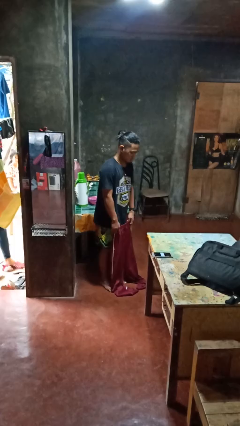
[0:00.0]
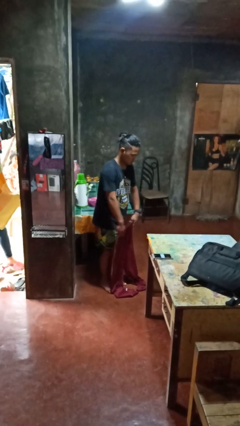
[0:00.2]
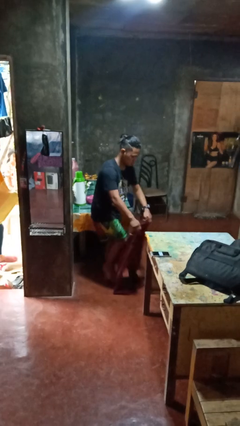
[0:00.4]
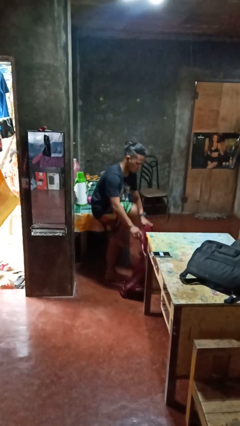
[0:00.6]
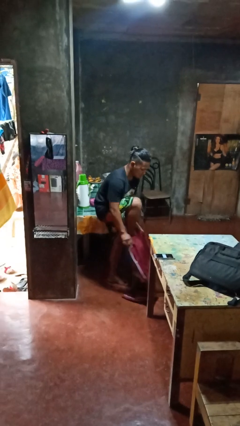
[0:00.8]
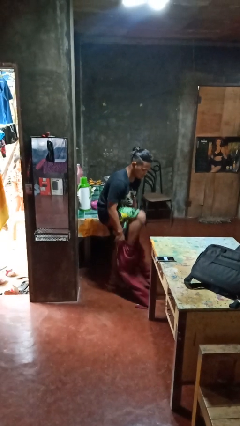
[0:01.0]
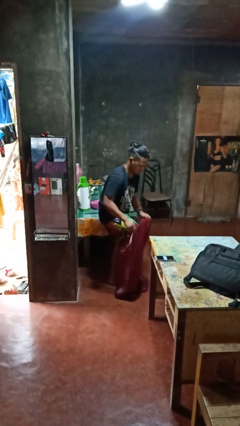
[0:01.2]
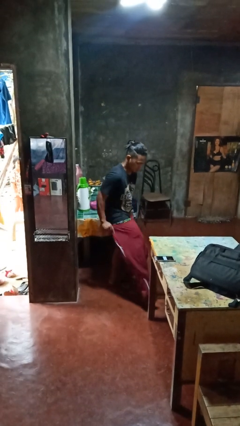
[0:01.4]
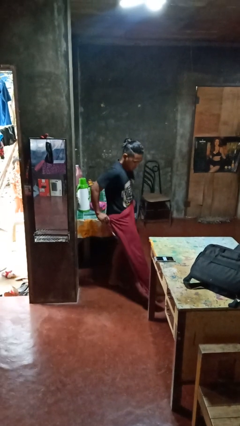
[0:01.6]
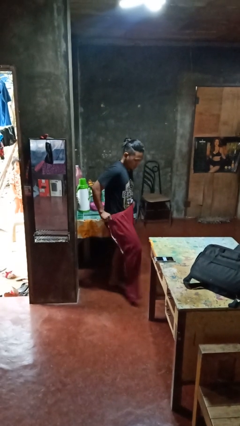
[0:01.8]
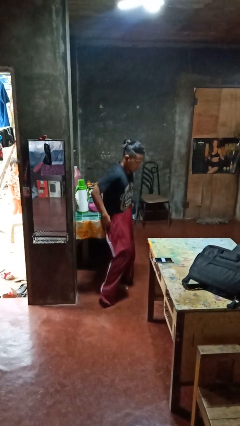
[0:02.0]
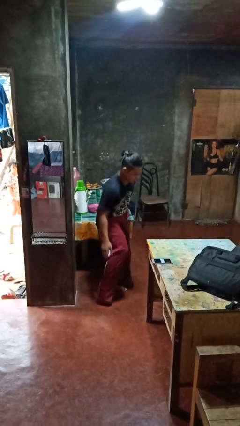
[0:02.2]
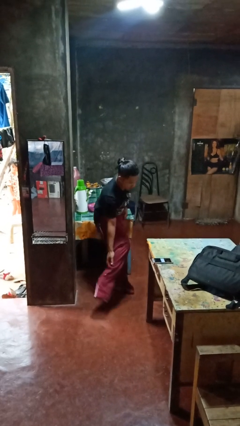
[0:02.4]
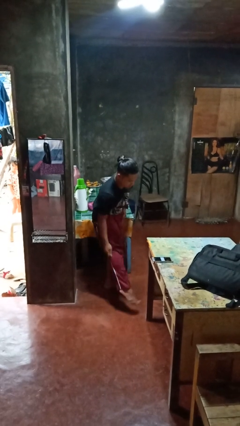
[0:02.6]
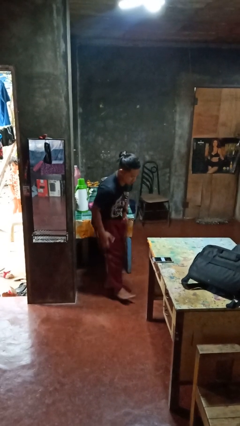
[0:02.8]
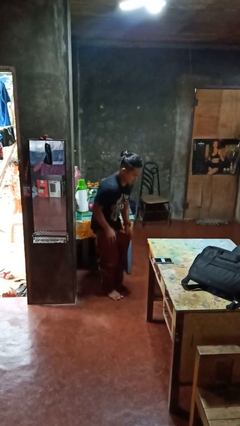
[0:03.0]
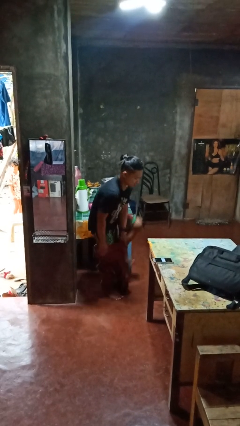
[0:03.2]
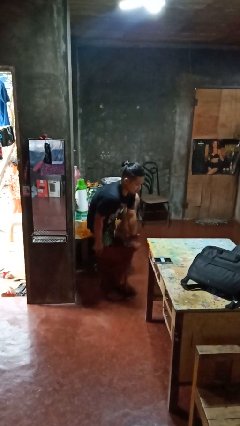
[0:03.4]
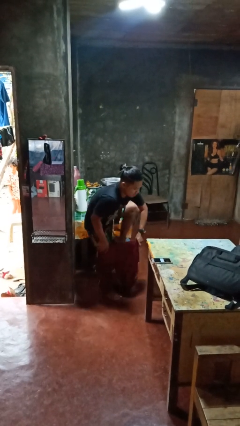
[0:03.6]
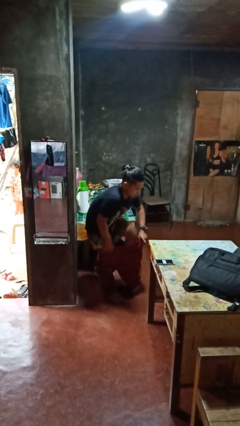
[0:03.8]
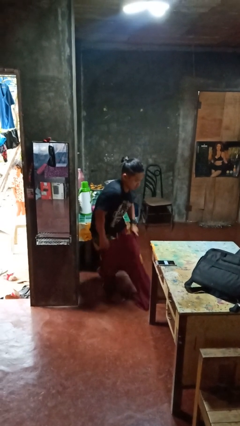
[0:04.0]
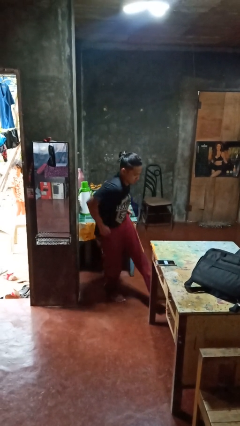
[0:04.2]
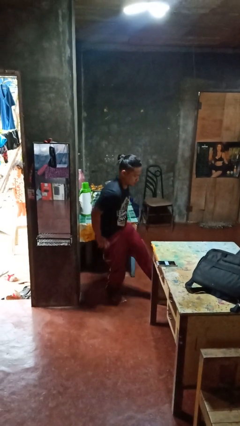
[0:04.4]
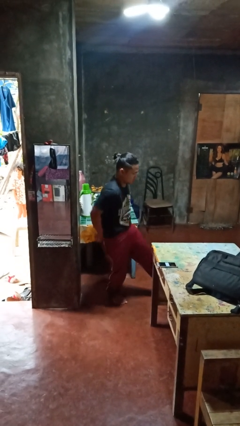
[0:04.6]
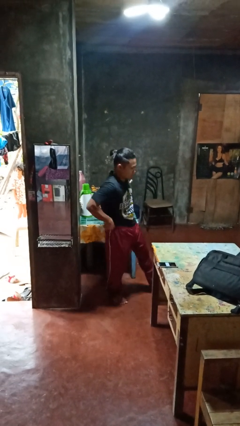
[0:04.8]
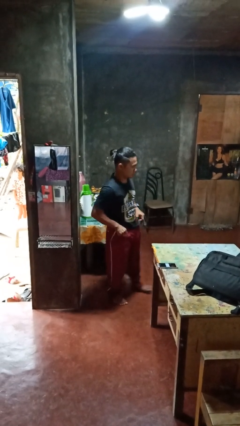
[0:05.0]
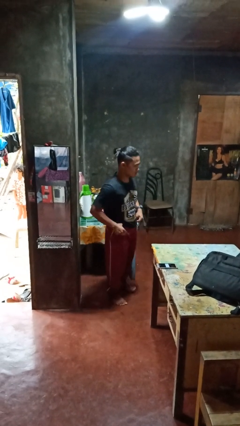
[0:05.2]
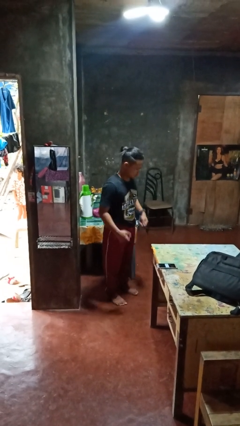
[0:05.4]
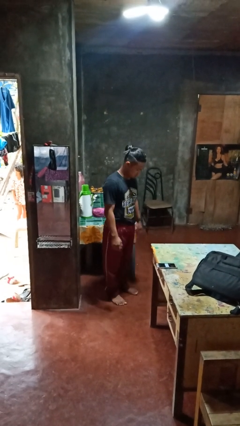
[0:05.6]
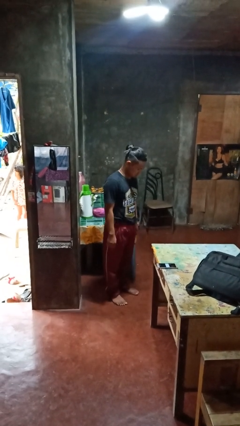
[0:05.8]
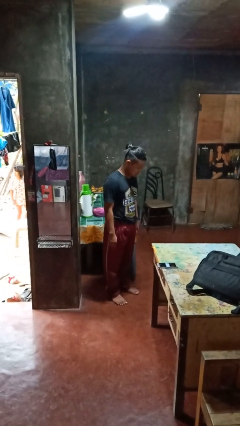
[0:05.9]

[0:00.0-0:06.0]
person puts on pants

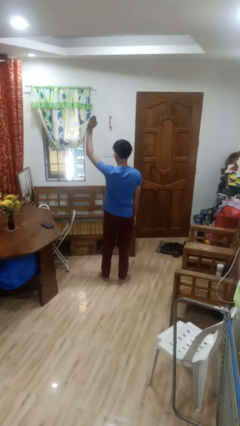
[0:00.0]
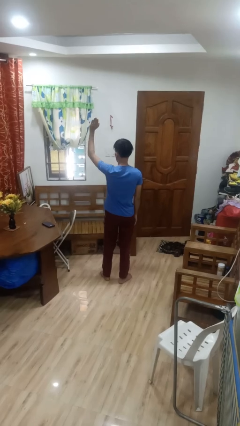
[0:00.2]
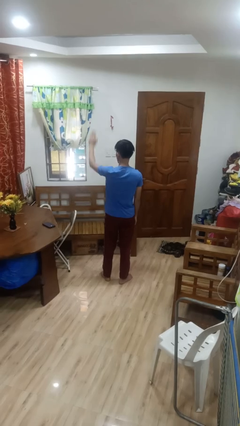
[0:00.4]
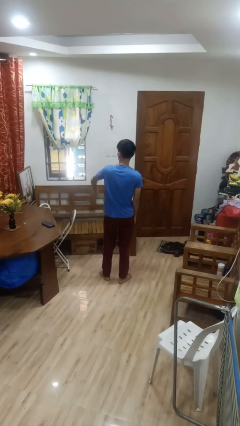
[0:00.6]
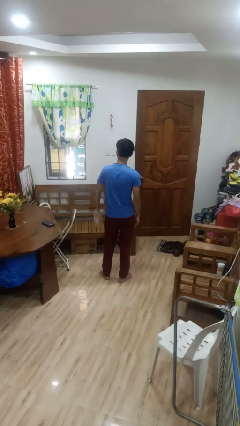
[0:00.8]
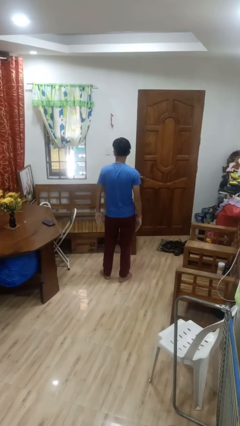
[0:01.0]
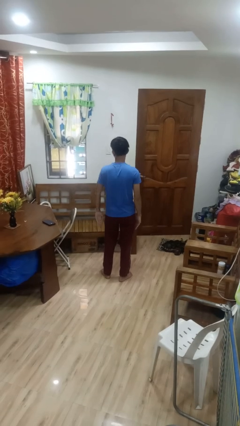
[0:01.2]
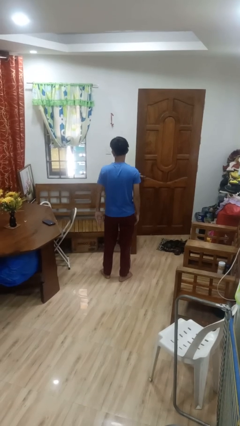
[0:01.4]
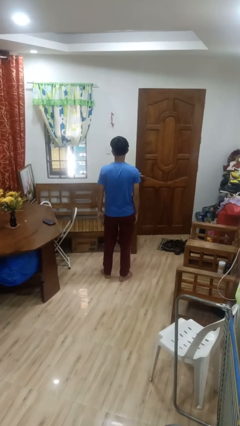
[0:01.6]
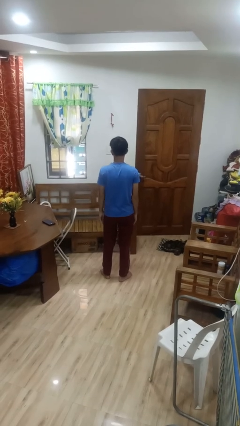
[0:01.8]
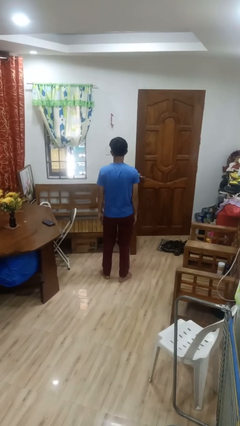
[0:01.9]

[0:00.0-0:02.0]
person gestures swipe down

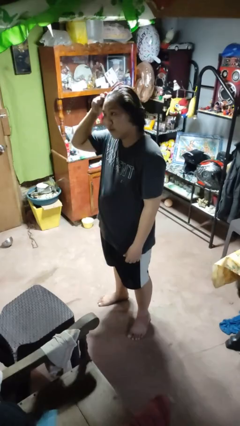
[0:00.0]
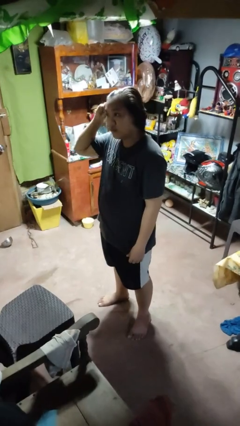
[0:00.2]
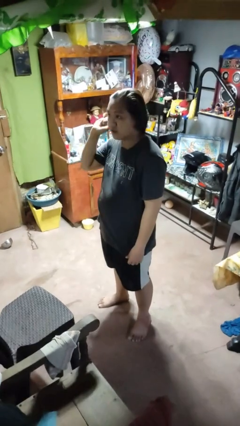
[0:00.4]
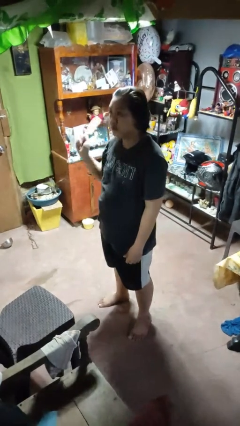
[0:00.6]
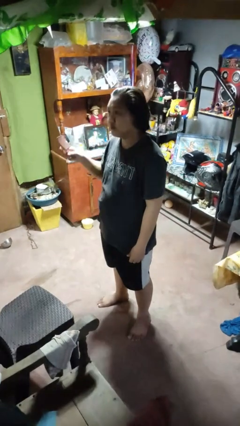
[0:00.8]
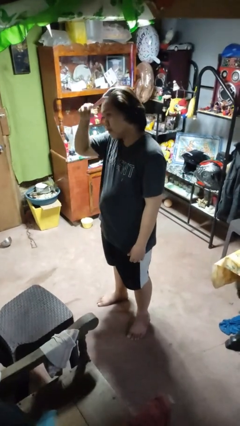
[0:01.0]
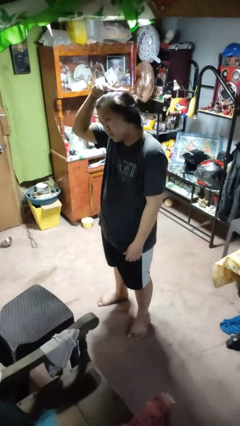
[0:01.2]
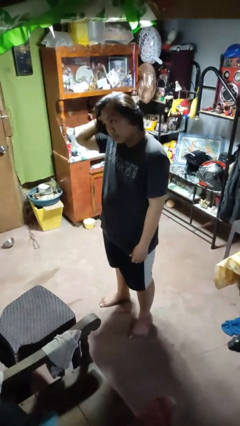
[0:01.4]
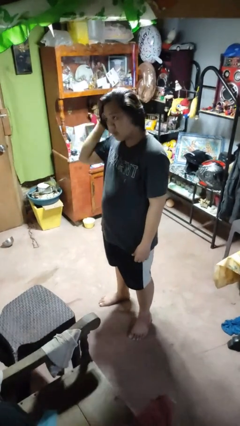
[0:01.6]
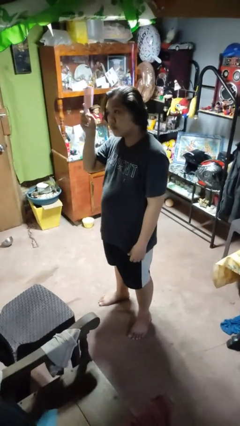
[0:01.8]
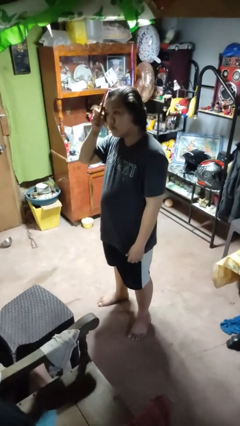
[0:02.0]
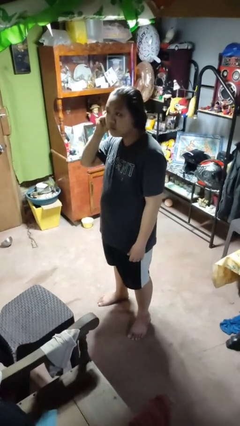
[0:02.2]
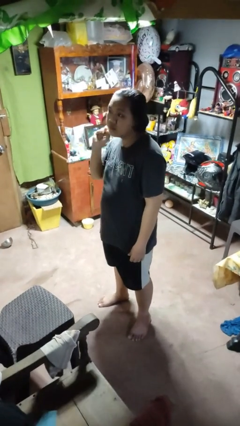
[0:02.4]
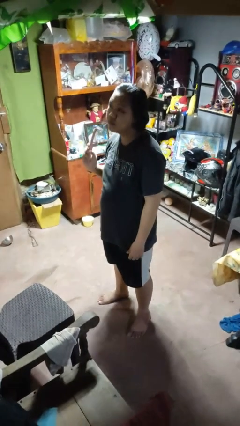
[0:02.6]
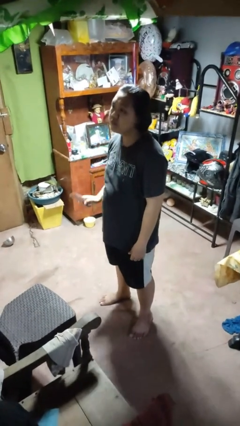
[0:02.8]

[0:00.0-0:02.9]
person brushes hair

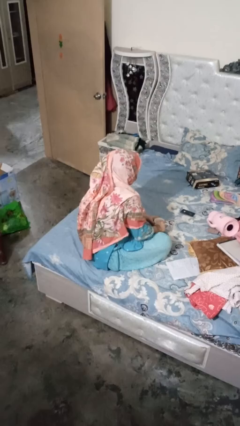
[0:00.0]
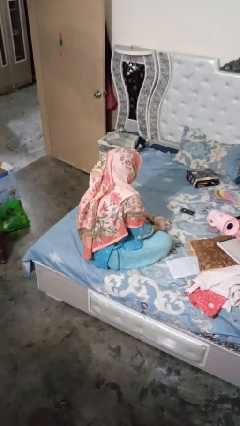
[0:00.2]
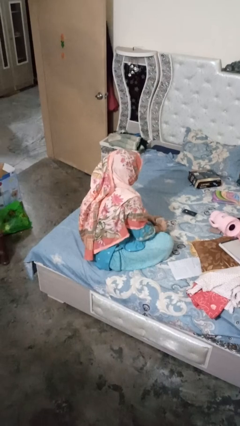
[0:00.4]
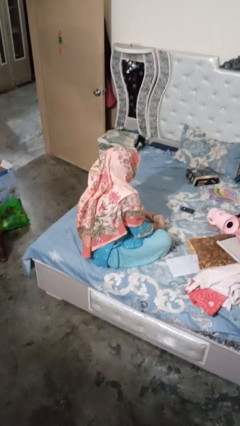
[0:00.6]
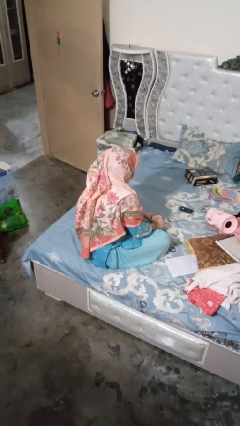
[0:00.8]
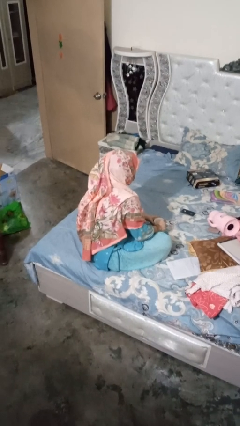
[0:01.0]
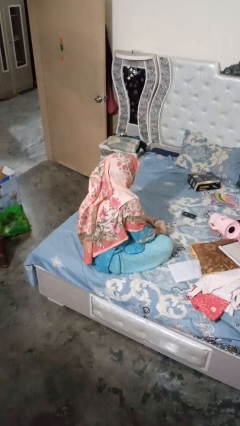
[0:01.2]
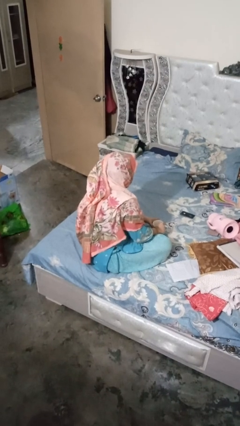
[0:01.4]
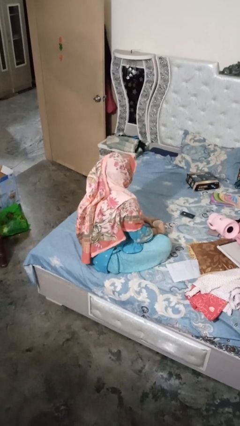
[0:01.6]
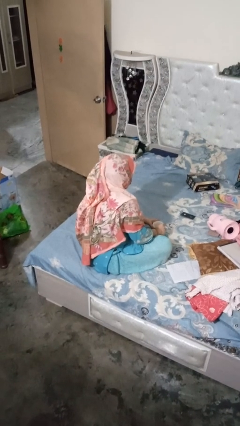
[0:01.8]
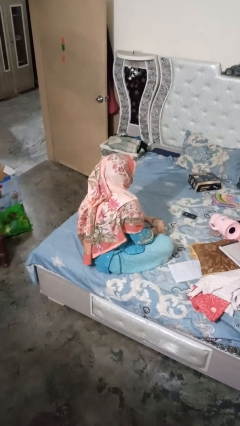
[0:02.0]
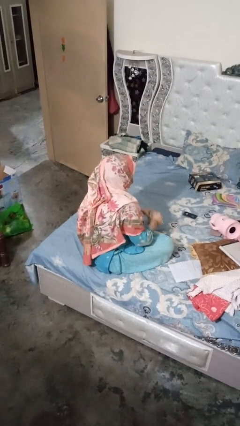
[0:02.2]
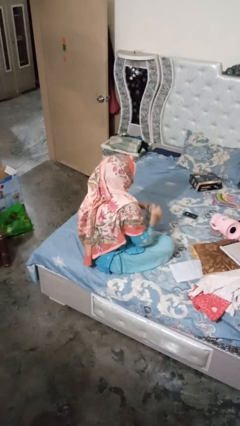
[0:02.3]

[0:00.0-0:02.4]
person stirs mug

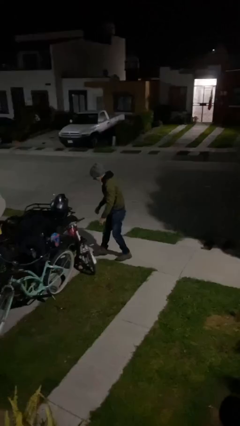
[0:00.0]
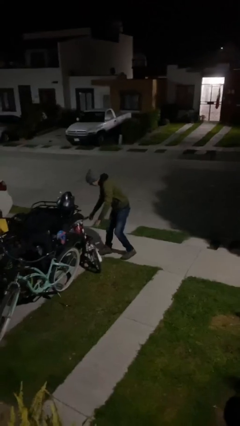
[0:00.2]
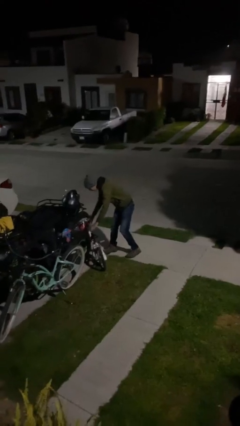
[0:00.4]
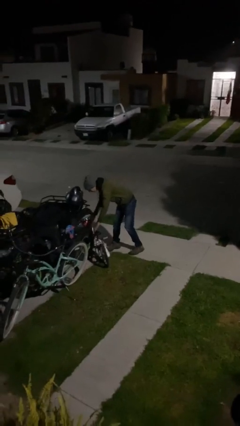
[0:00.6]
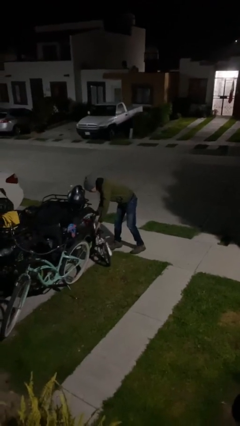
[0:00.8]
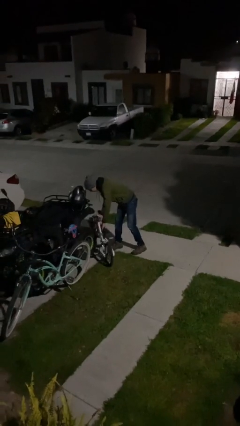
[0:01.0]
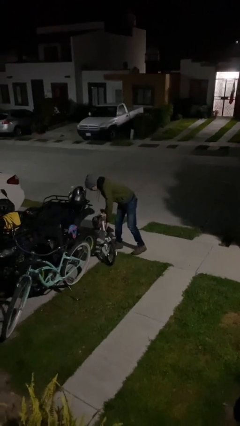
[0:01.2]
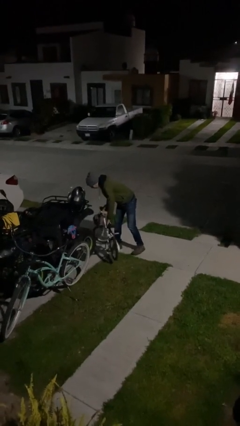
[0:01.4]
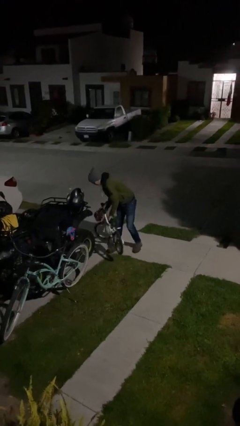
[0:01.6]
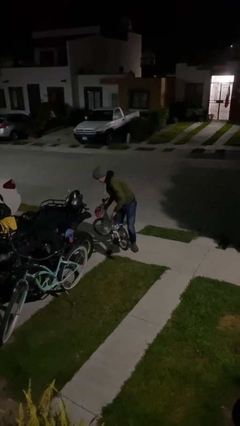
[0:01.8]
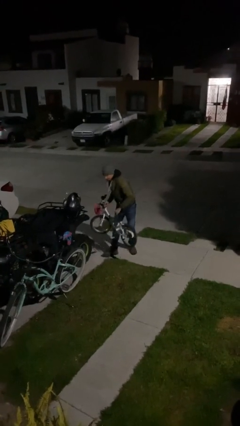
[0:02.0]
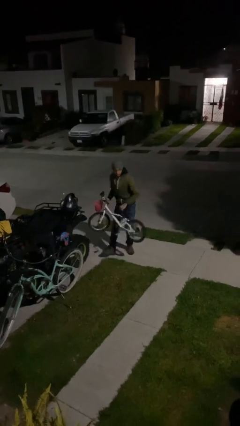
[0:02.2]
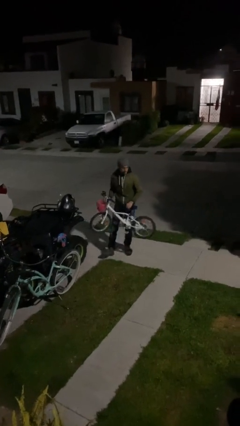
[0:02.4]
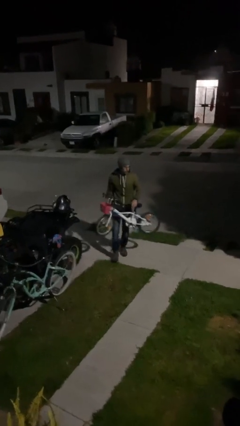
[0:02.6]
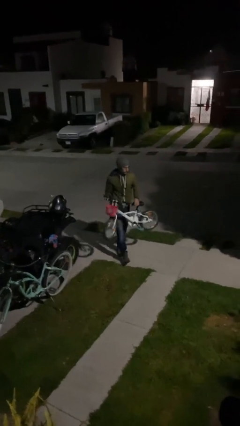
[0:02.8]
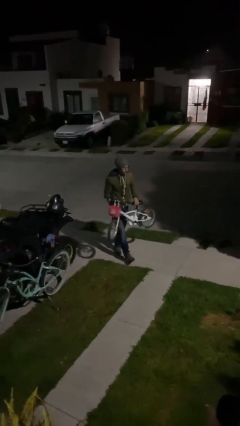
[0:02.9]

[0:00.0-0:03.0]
person picks up object from floor

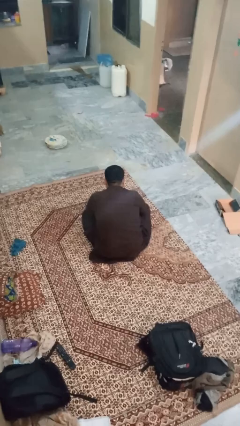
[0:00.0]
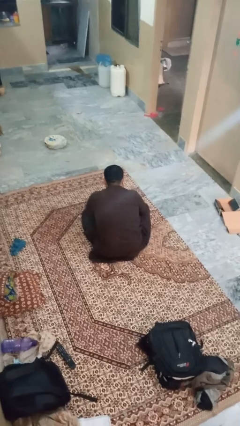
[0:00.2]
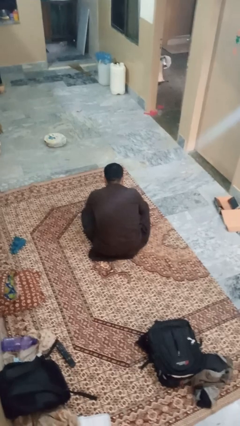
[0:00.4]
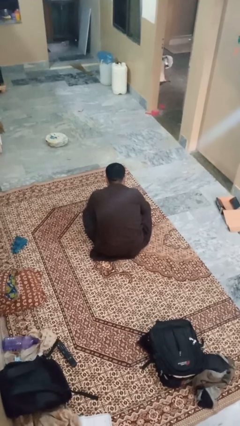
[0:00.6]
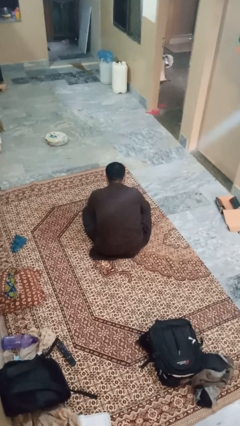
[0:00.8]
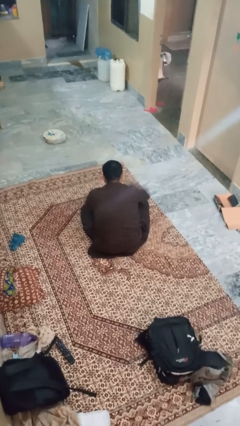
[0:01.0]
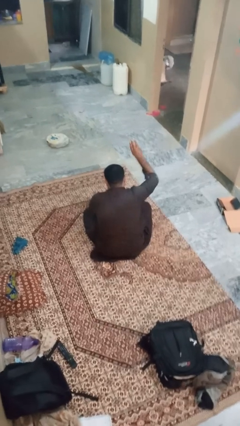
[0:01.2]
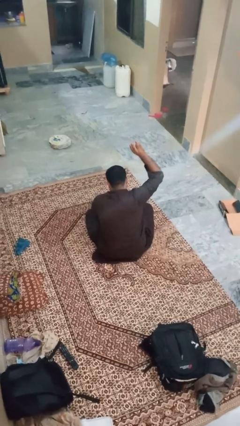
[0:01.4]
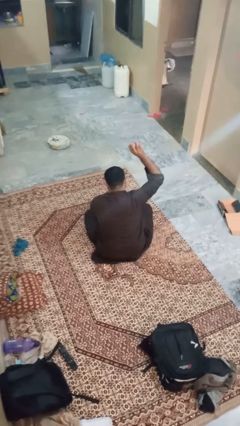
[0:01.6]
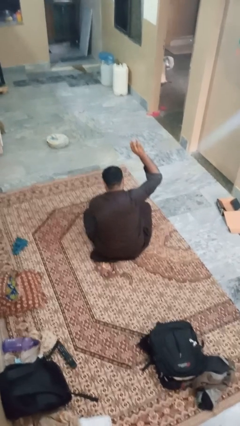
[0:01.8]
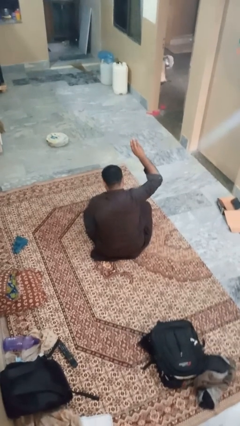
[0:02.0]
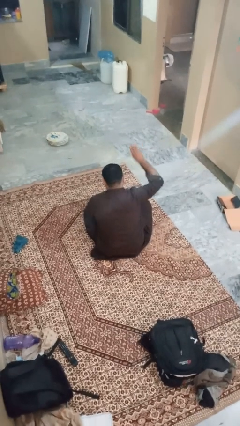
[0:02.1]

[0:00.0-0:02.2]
person gestures number three
